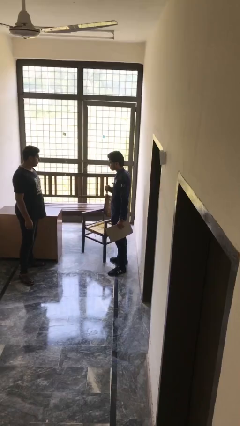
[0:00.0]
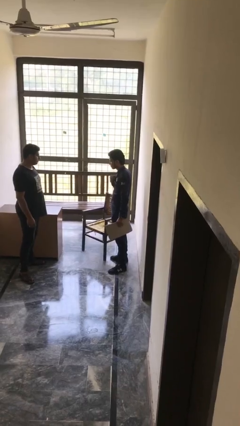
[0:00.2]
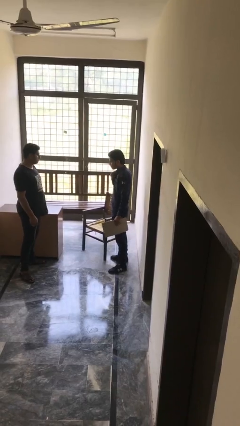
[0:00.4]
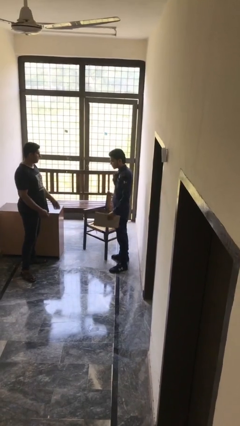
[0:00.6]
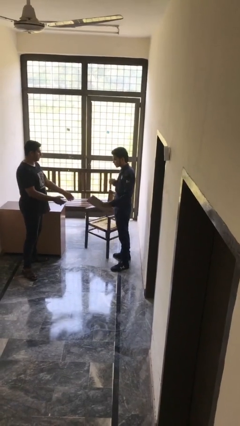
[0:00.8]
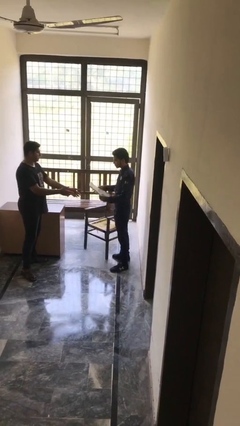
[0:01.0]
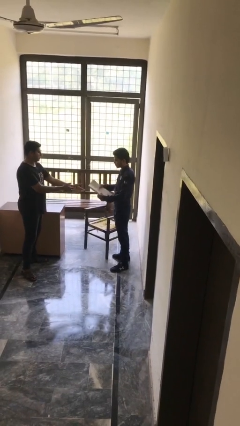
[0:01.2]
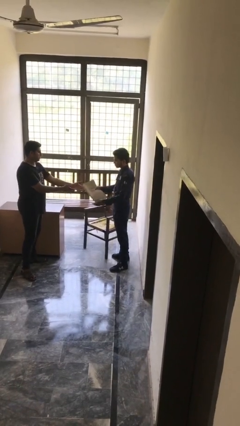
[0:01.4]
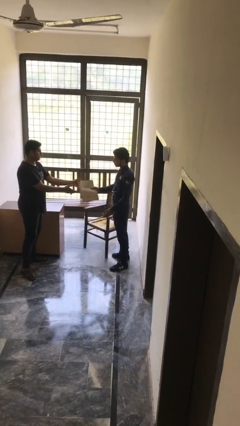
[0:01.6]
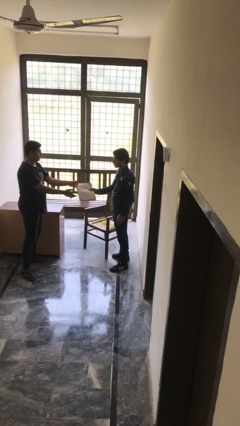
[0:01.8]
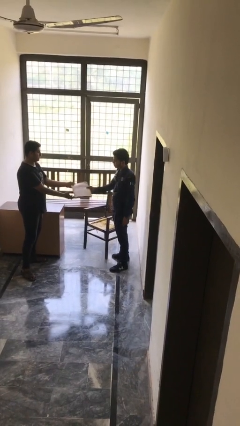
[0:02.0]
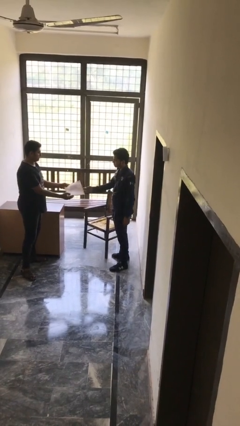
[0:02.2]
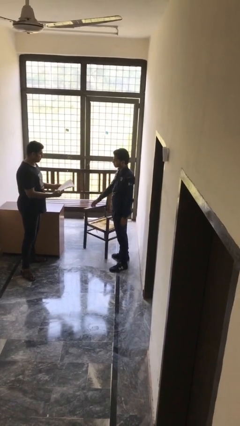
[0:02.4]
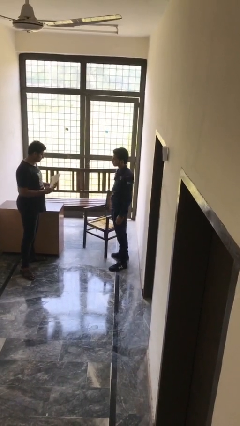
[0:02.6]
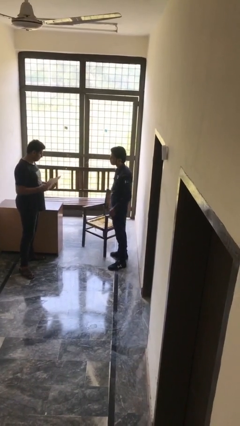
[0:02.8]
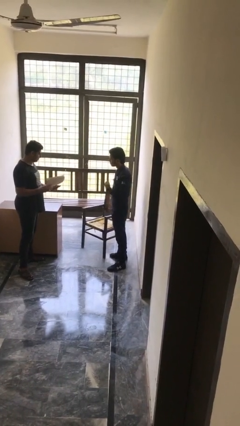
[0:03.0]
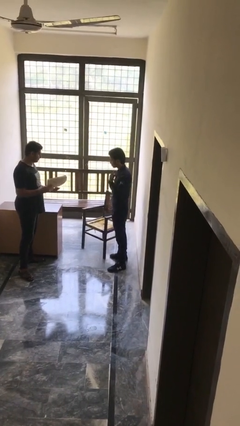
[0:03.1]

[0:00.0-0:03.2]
person transfers object to person

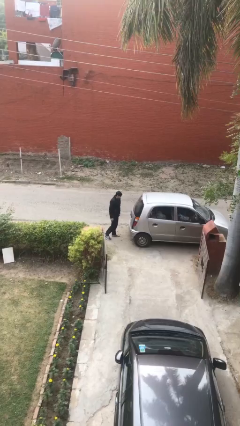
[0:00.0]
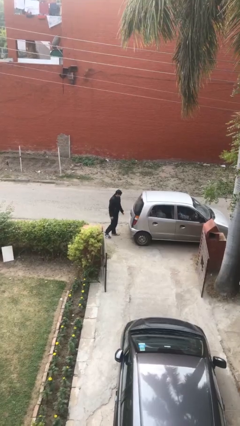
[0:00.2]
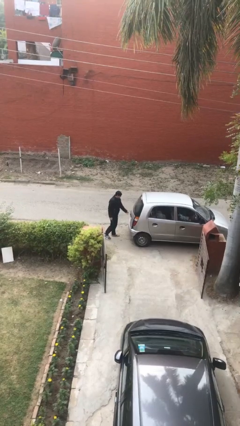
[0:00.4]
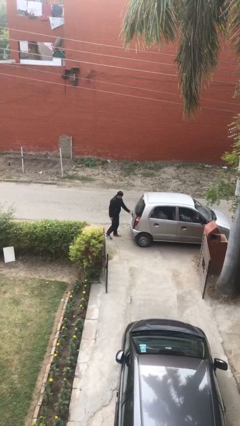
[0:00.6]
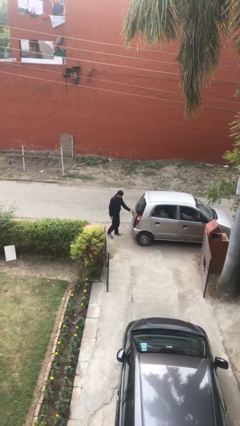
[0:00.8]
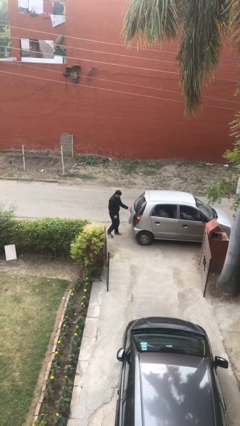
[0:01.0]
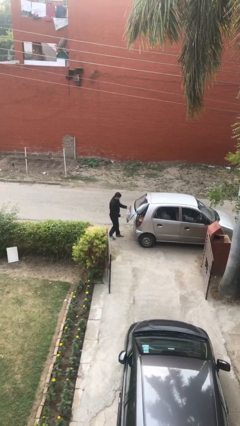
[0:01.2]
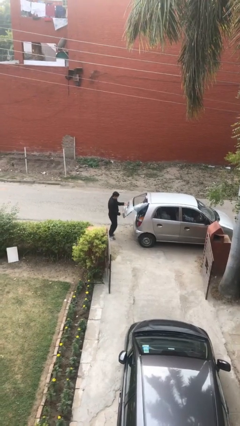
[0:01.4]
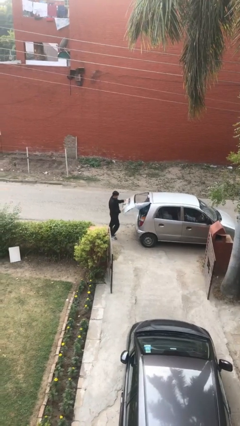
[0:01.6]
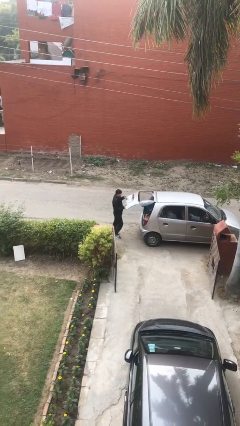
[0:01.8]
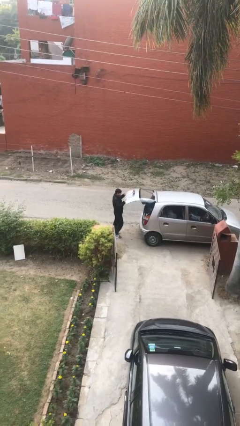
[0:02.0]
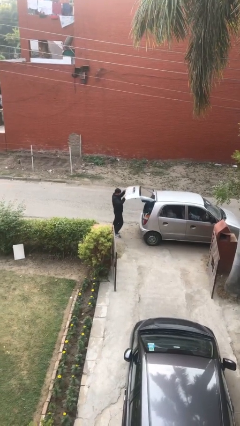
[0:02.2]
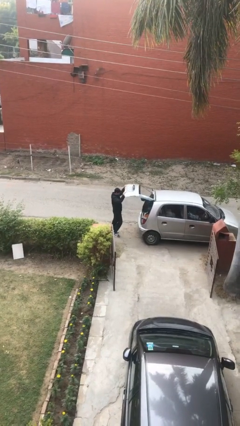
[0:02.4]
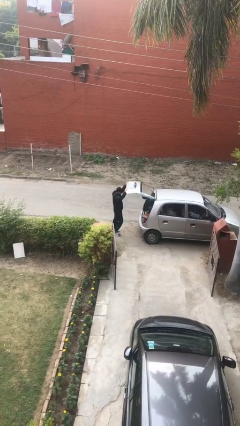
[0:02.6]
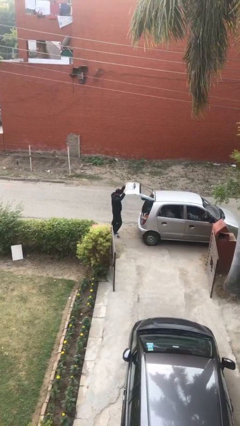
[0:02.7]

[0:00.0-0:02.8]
person opens car trunk

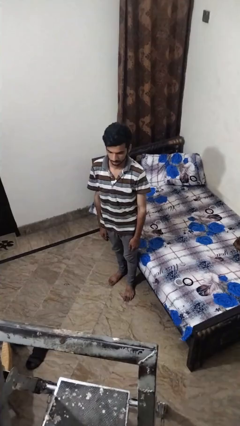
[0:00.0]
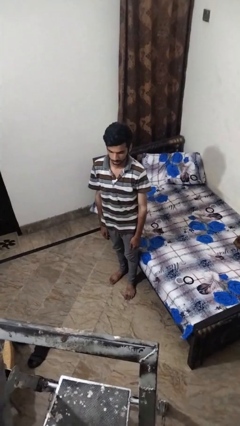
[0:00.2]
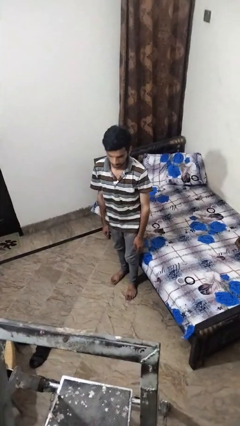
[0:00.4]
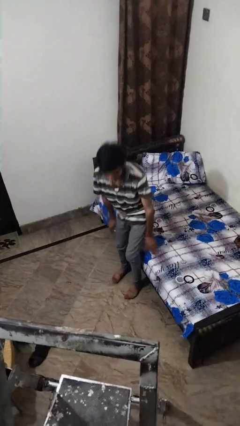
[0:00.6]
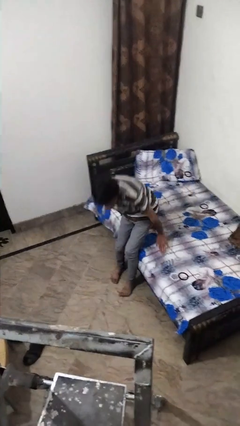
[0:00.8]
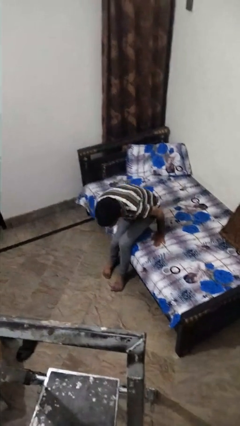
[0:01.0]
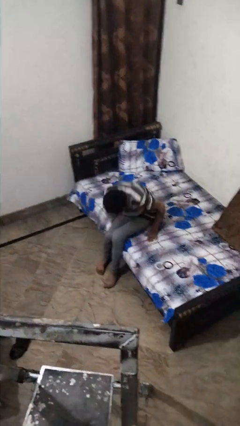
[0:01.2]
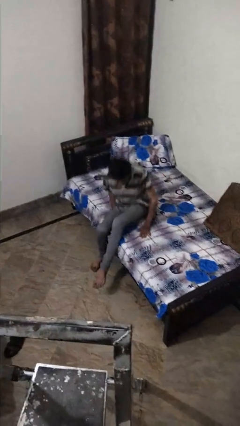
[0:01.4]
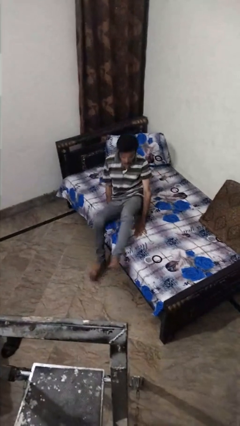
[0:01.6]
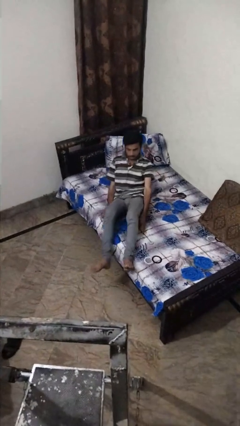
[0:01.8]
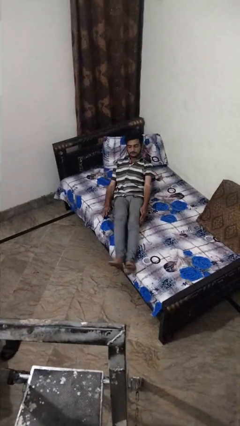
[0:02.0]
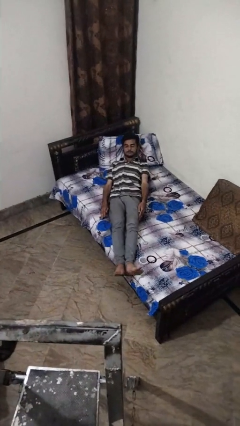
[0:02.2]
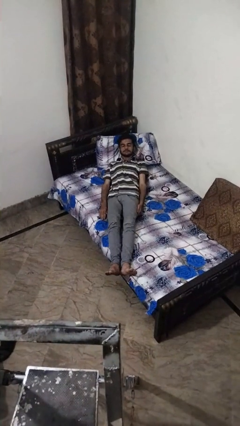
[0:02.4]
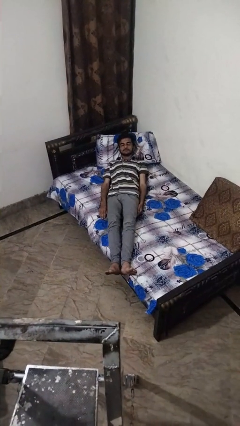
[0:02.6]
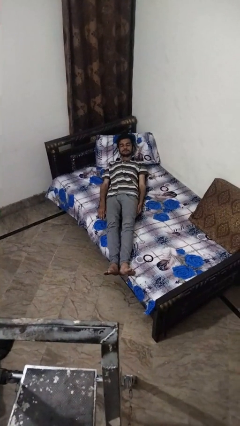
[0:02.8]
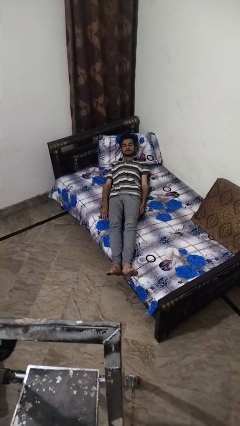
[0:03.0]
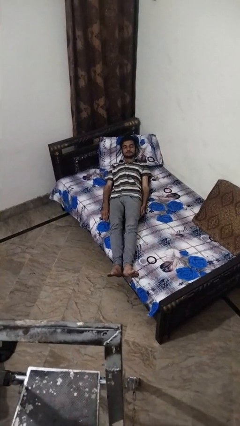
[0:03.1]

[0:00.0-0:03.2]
person lies down on bed

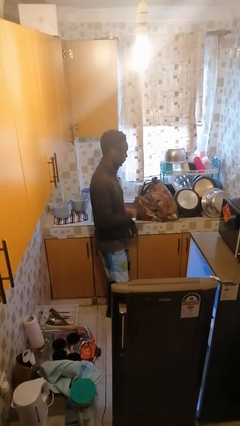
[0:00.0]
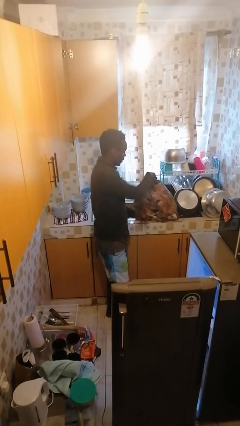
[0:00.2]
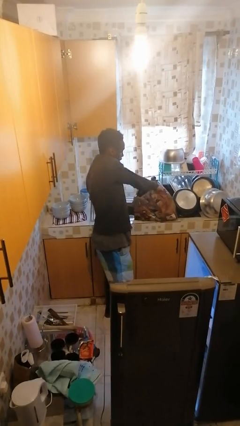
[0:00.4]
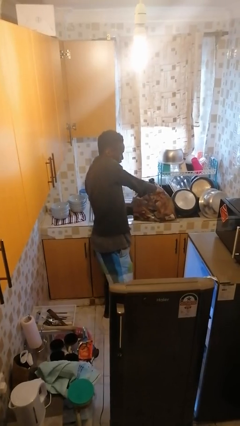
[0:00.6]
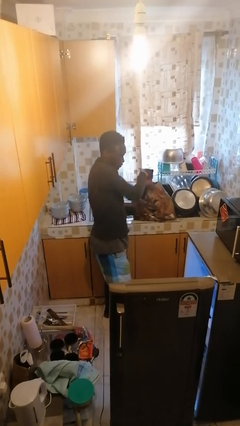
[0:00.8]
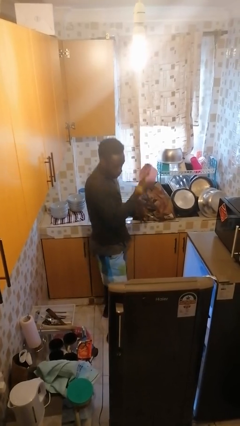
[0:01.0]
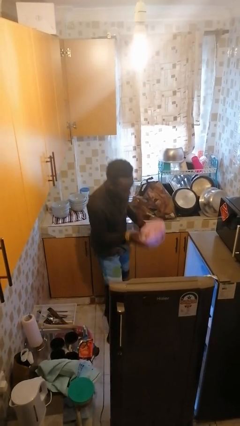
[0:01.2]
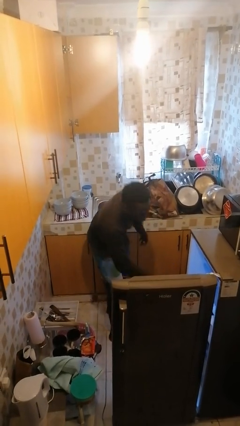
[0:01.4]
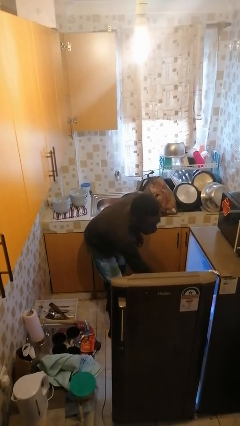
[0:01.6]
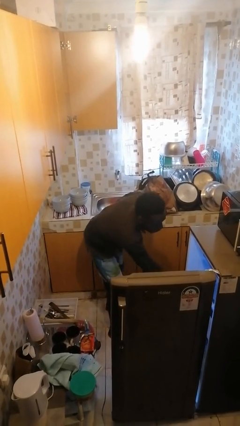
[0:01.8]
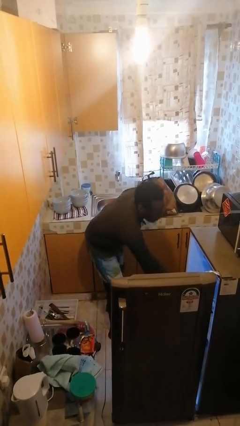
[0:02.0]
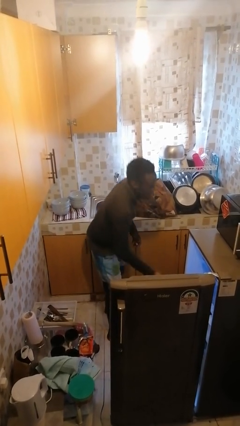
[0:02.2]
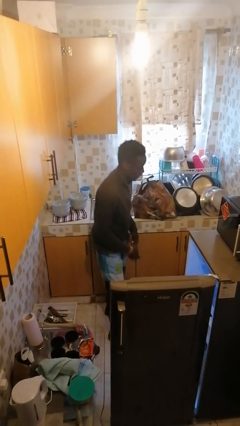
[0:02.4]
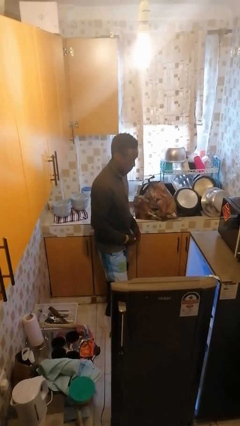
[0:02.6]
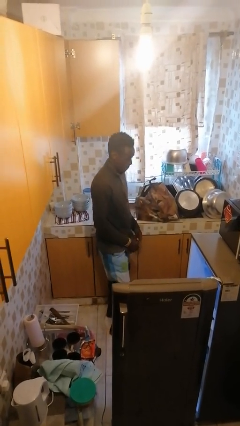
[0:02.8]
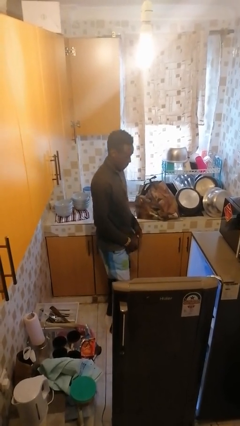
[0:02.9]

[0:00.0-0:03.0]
person loads groceries into refrigerator

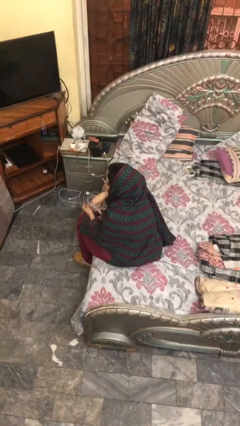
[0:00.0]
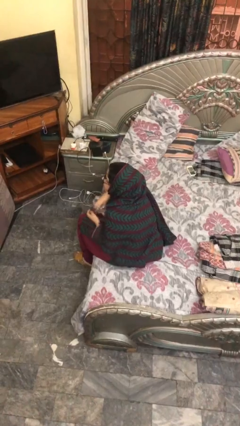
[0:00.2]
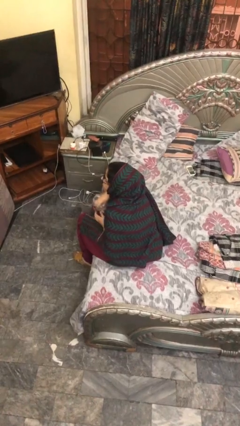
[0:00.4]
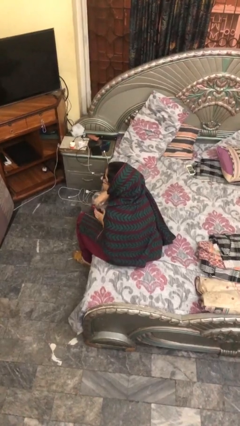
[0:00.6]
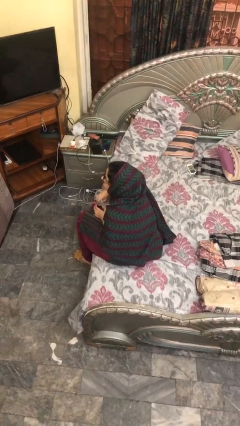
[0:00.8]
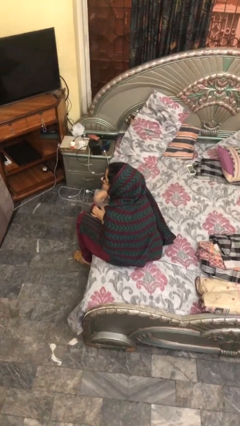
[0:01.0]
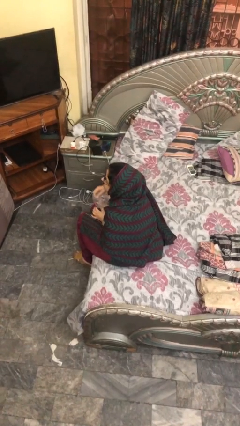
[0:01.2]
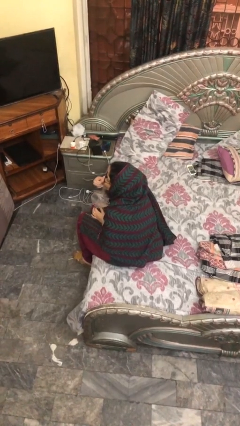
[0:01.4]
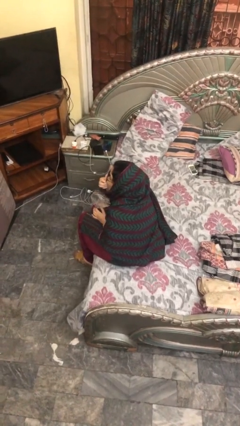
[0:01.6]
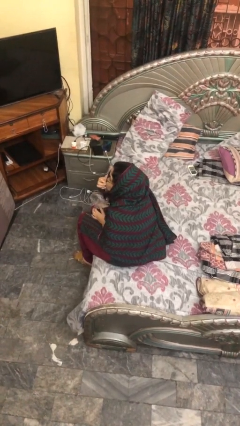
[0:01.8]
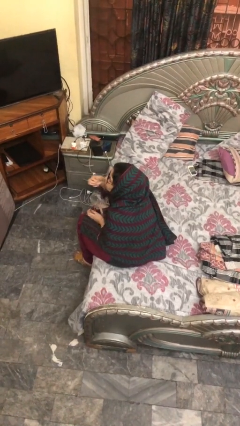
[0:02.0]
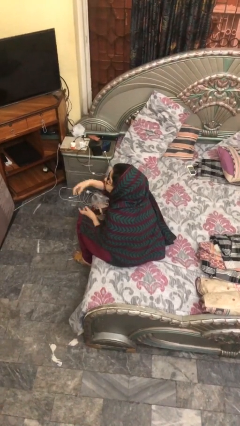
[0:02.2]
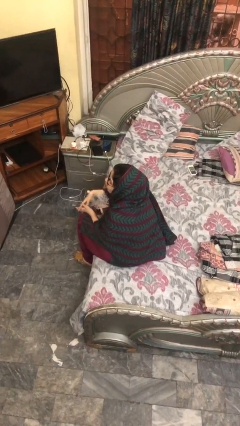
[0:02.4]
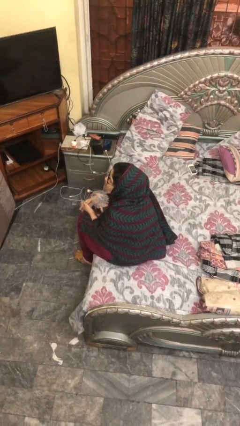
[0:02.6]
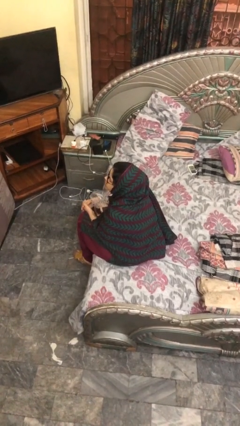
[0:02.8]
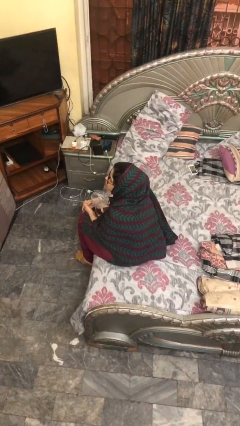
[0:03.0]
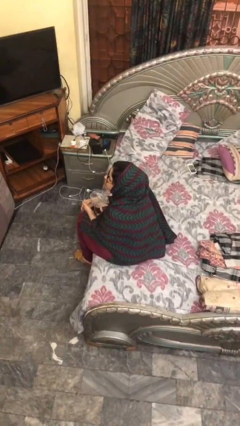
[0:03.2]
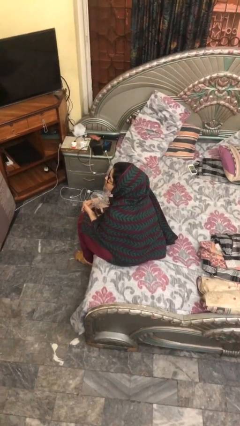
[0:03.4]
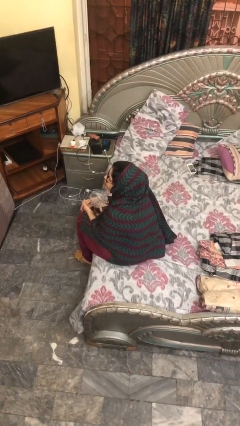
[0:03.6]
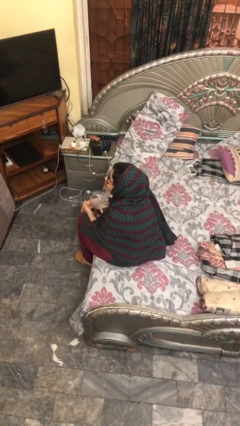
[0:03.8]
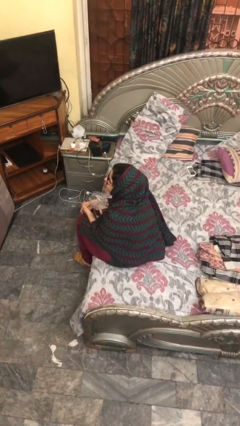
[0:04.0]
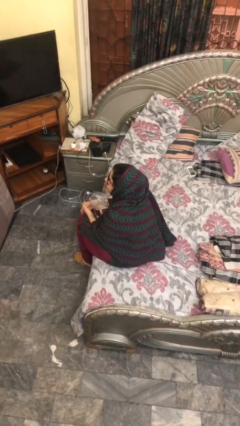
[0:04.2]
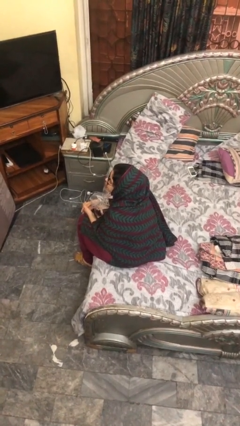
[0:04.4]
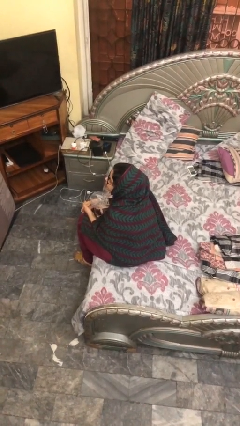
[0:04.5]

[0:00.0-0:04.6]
person eats snack from bag

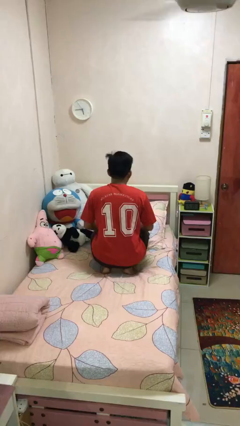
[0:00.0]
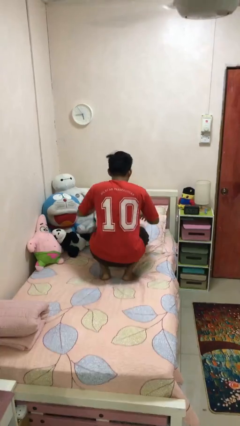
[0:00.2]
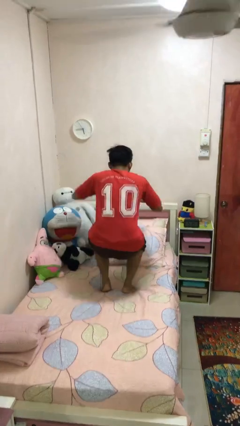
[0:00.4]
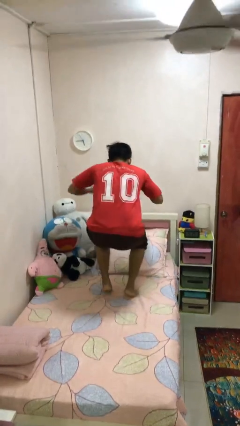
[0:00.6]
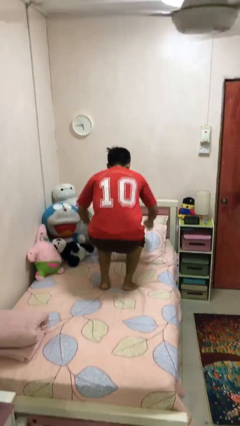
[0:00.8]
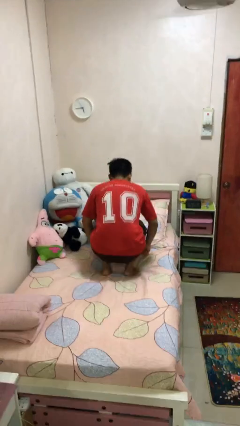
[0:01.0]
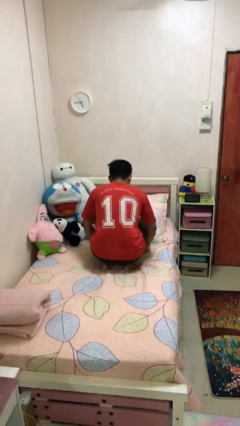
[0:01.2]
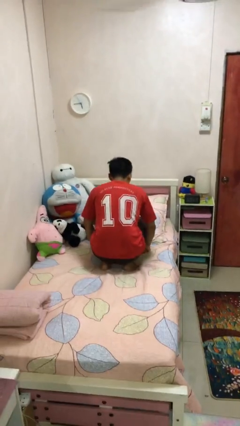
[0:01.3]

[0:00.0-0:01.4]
person jumps on bed
